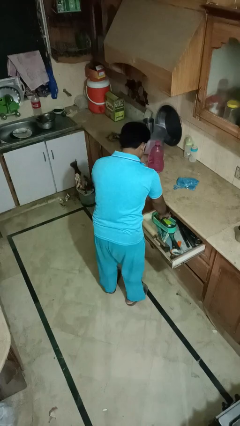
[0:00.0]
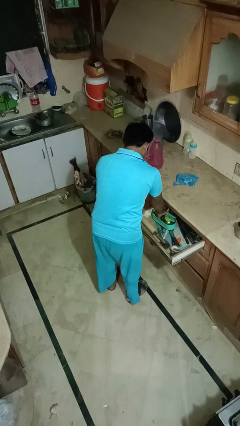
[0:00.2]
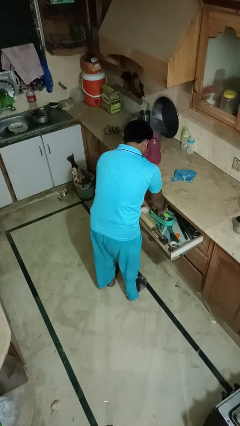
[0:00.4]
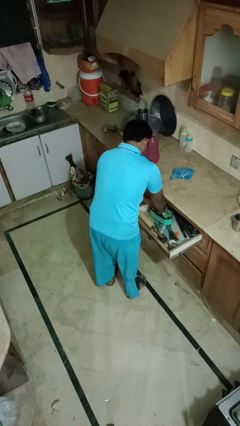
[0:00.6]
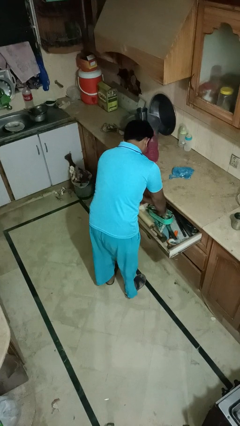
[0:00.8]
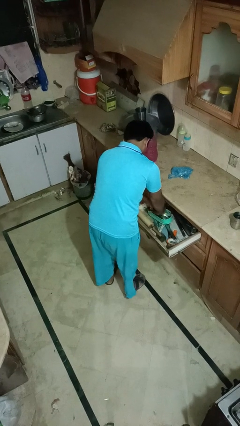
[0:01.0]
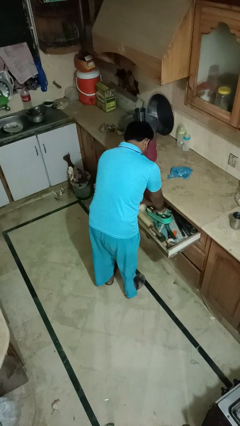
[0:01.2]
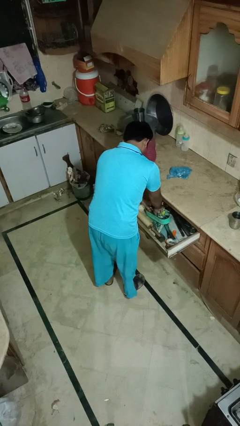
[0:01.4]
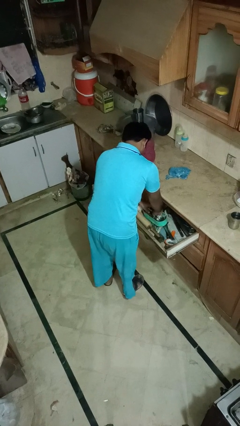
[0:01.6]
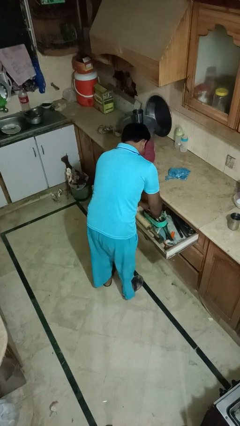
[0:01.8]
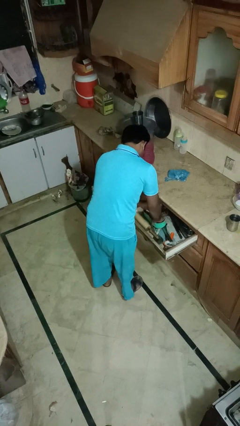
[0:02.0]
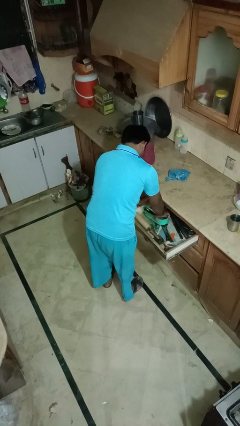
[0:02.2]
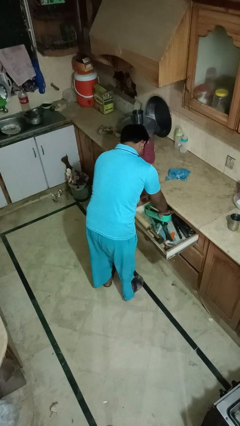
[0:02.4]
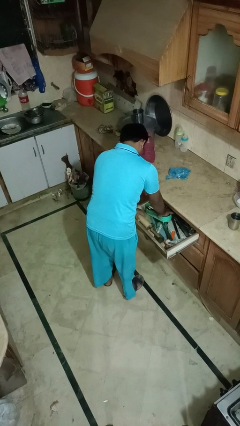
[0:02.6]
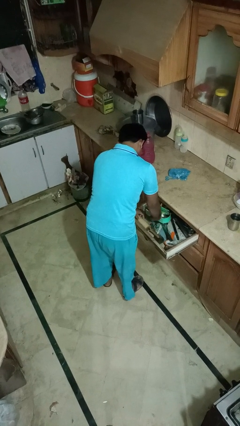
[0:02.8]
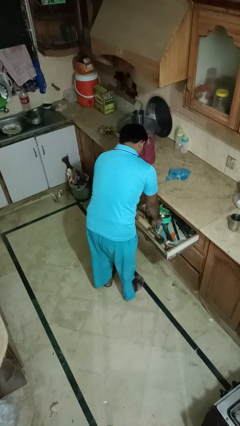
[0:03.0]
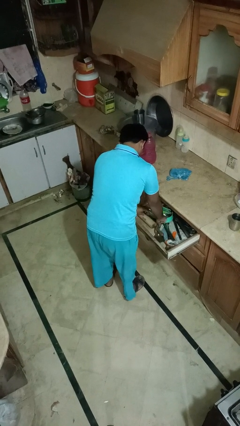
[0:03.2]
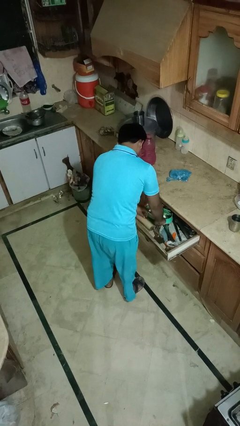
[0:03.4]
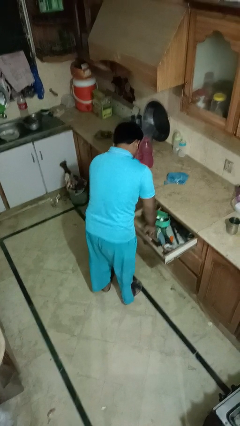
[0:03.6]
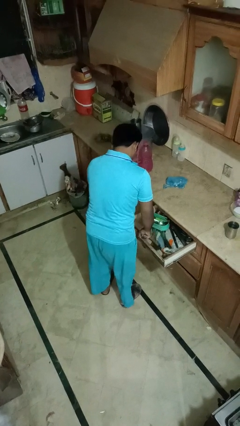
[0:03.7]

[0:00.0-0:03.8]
person searches in kitchen drawer

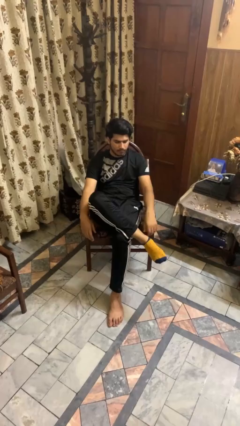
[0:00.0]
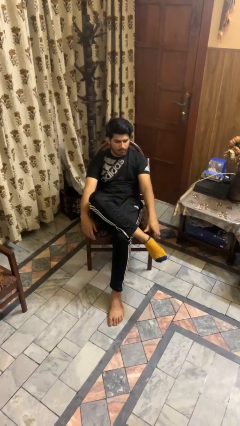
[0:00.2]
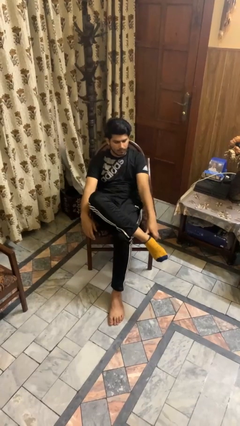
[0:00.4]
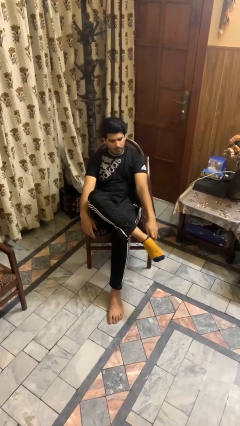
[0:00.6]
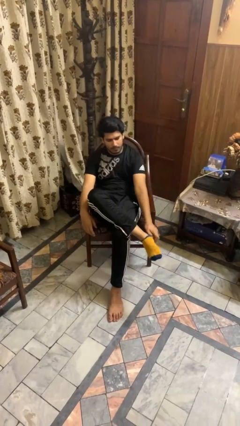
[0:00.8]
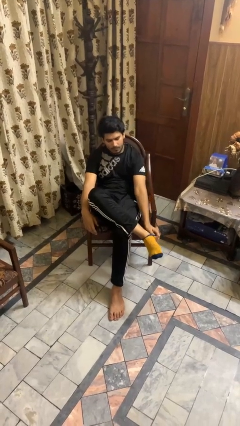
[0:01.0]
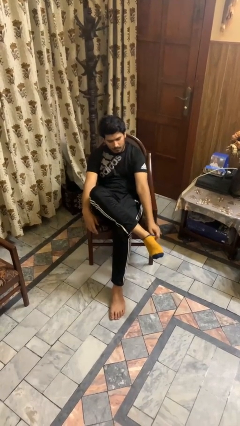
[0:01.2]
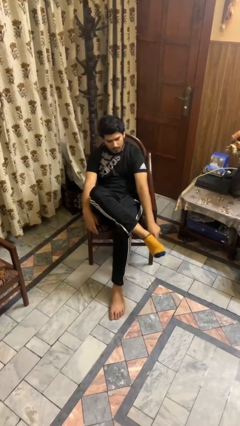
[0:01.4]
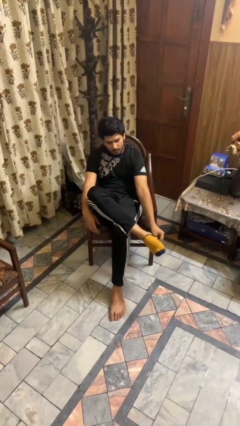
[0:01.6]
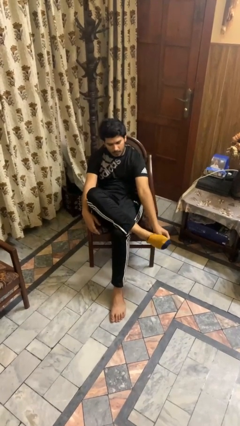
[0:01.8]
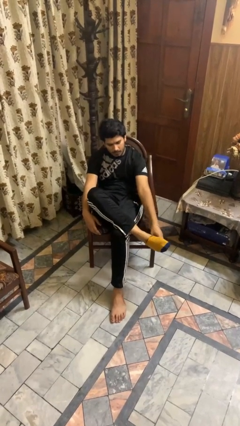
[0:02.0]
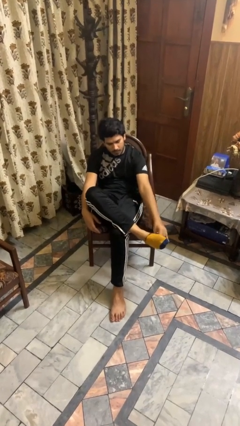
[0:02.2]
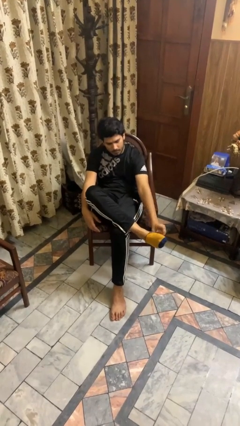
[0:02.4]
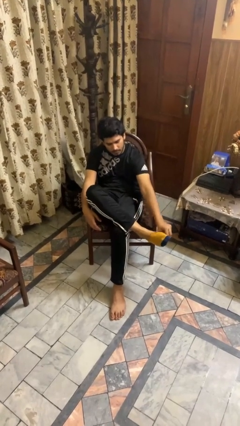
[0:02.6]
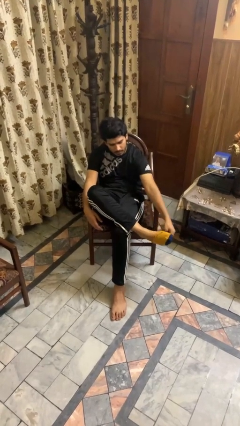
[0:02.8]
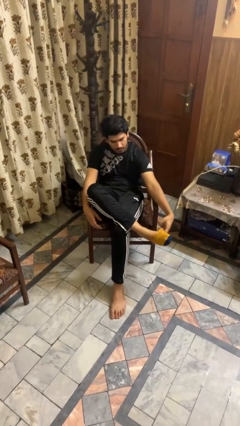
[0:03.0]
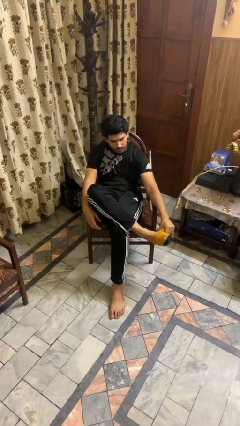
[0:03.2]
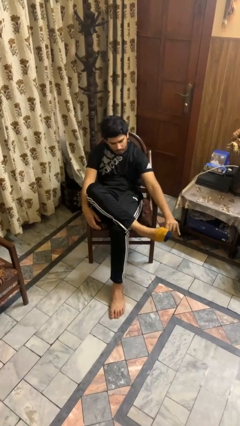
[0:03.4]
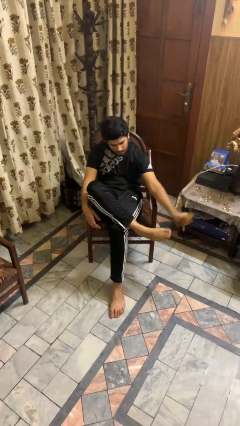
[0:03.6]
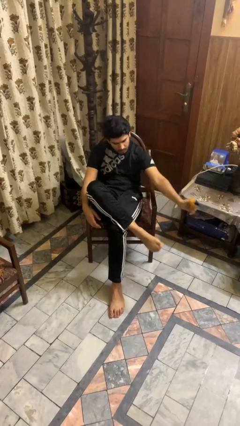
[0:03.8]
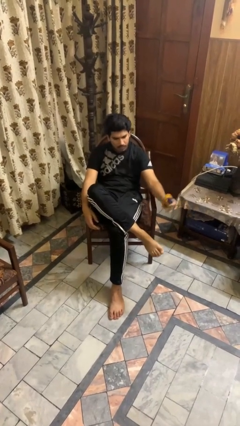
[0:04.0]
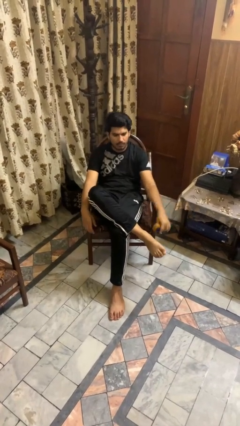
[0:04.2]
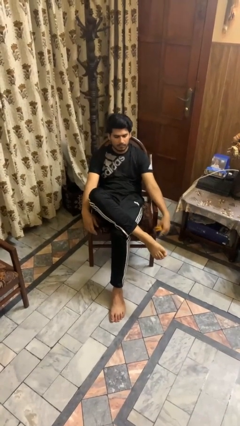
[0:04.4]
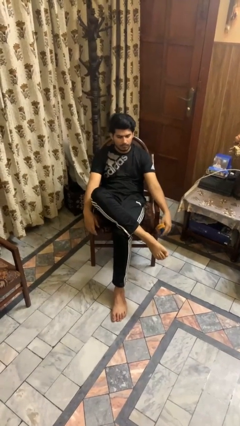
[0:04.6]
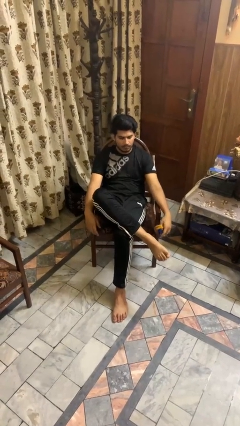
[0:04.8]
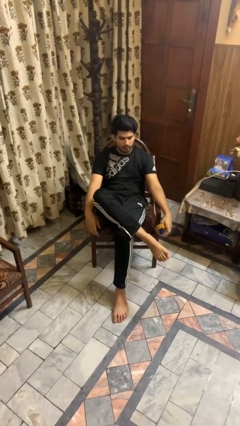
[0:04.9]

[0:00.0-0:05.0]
person takes off socks

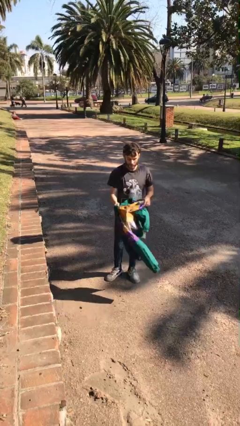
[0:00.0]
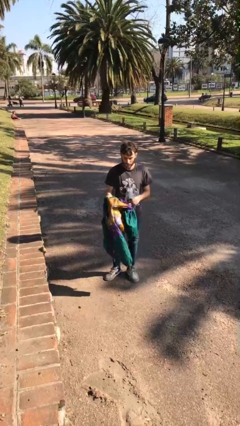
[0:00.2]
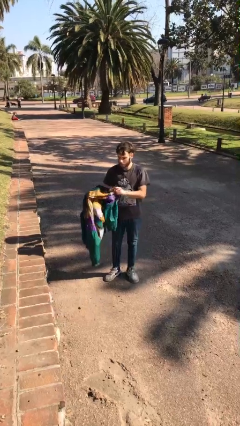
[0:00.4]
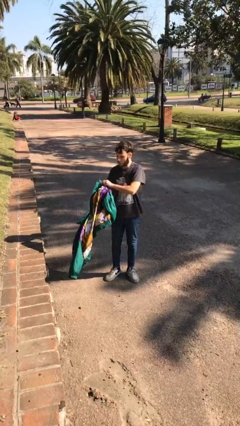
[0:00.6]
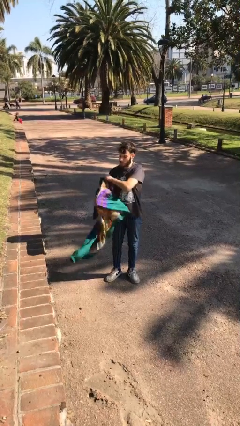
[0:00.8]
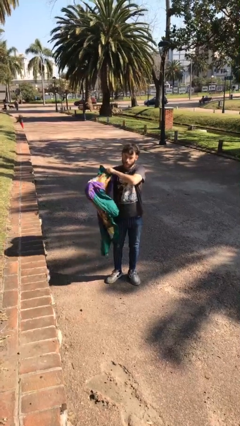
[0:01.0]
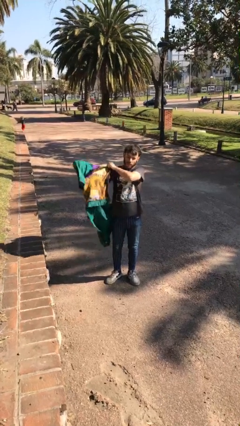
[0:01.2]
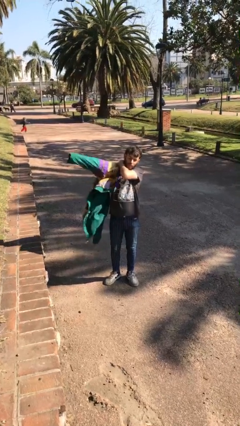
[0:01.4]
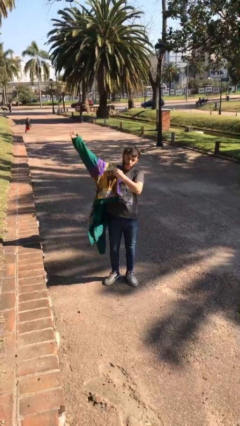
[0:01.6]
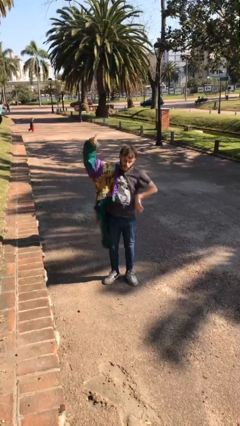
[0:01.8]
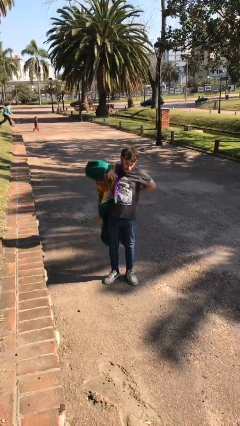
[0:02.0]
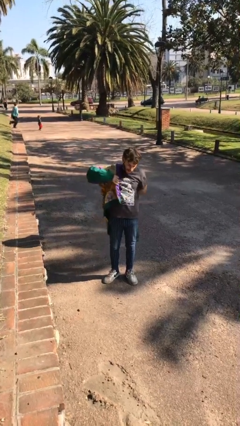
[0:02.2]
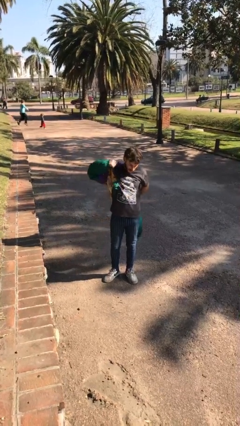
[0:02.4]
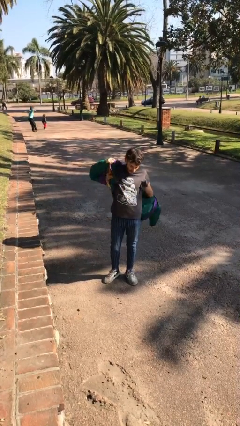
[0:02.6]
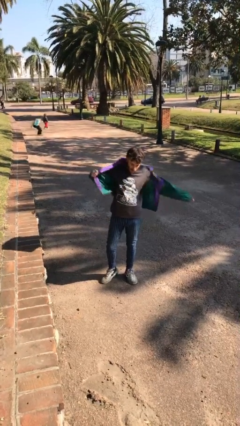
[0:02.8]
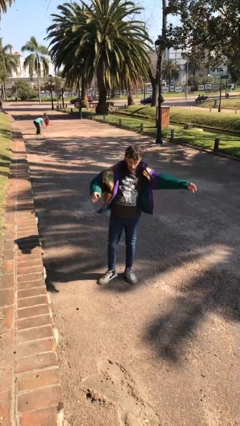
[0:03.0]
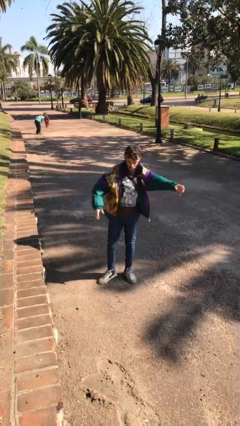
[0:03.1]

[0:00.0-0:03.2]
person puts on jacket

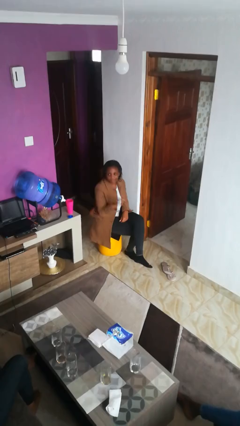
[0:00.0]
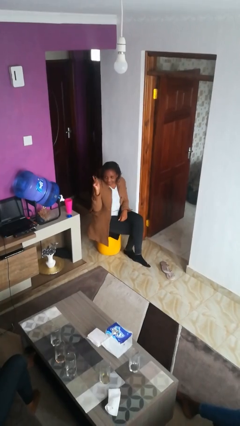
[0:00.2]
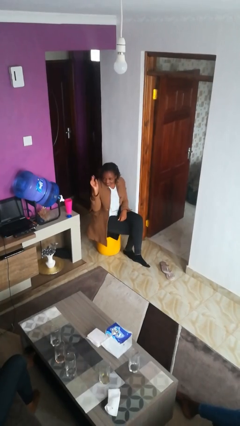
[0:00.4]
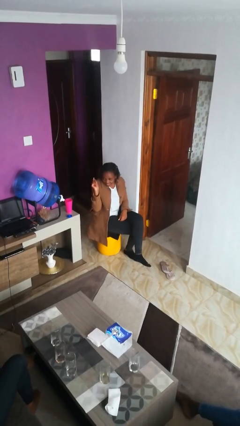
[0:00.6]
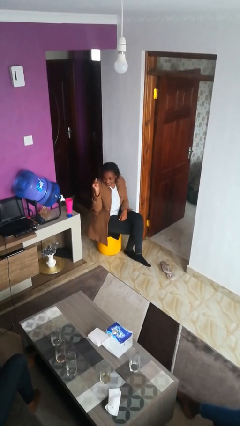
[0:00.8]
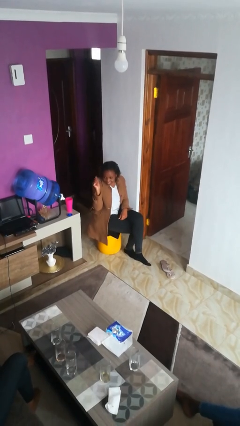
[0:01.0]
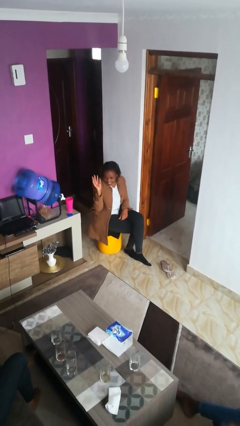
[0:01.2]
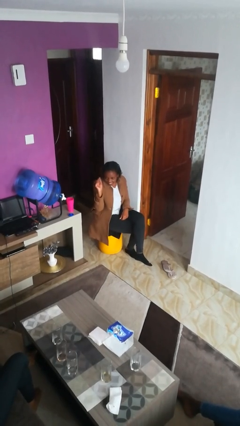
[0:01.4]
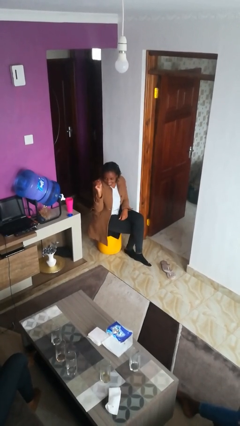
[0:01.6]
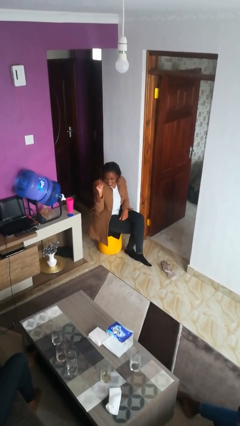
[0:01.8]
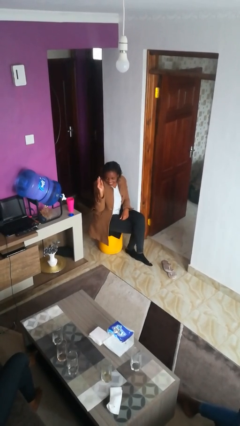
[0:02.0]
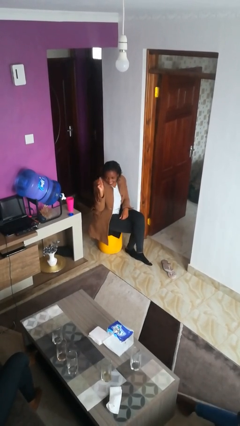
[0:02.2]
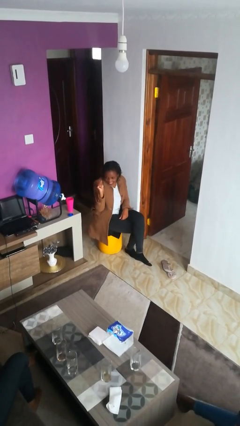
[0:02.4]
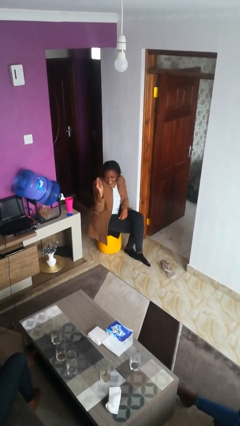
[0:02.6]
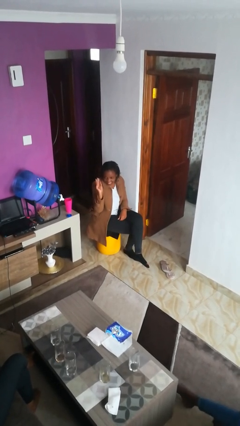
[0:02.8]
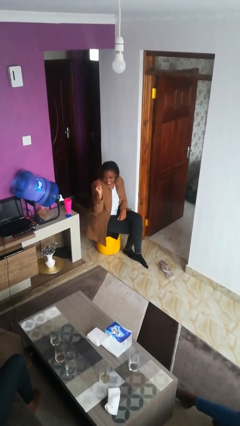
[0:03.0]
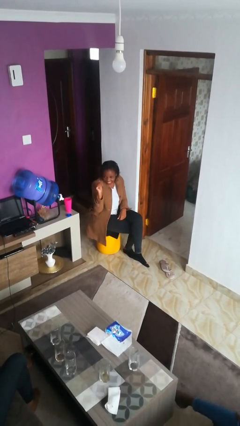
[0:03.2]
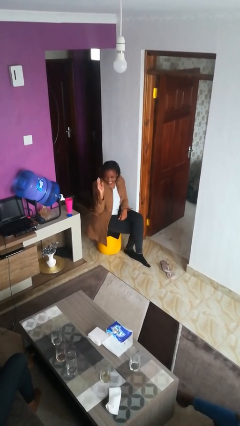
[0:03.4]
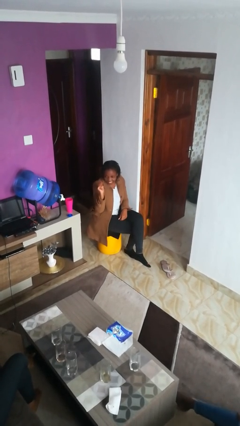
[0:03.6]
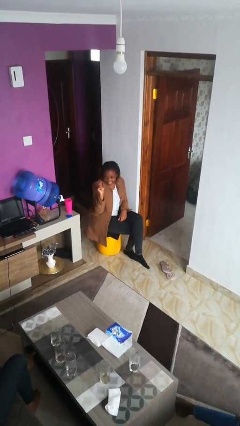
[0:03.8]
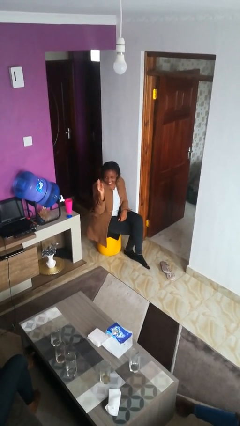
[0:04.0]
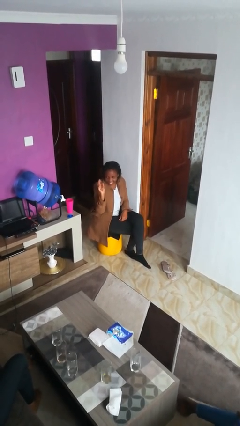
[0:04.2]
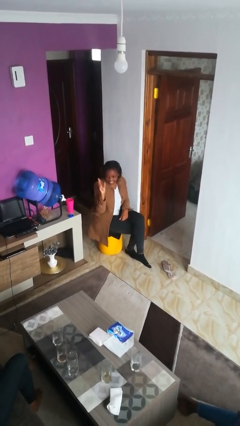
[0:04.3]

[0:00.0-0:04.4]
person gestures come here

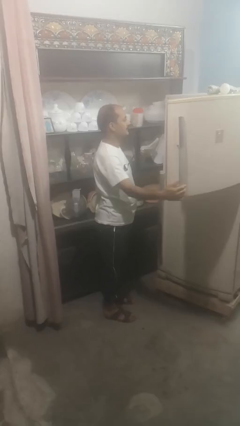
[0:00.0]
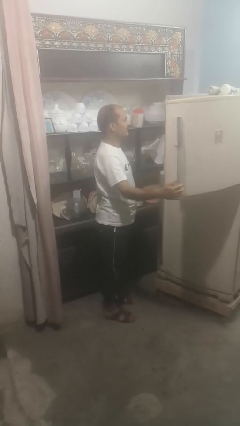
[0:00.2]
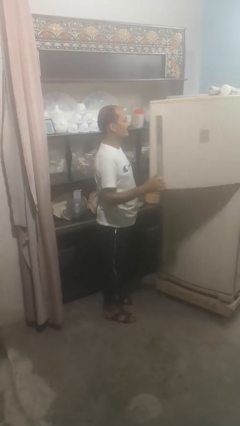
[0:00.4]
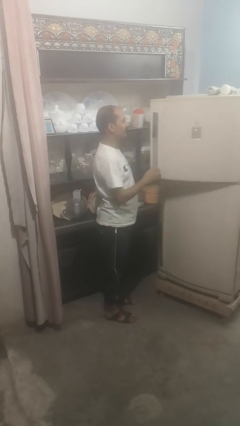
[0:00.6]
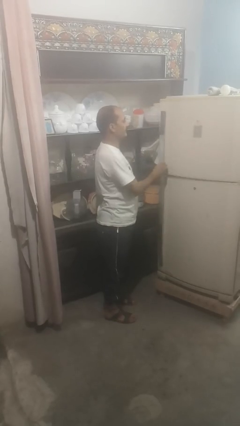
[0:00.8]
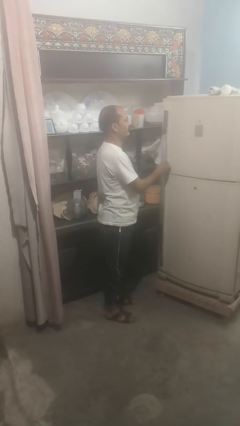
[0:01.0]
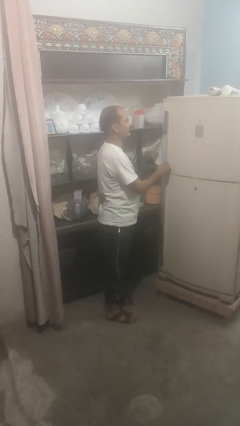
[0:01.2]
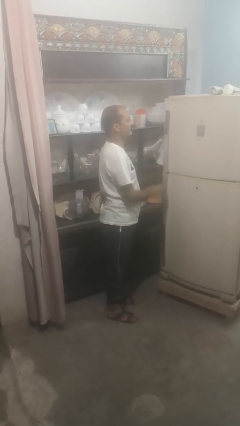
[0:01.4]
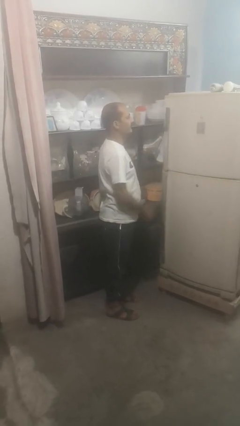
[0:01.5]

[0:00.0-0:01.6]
person closes refrigerator
